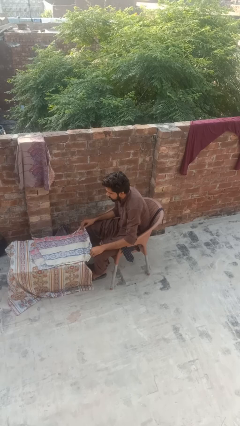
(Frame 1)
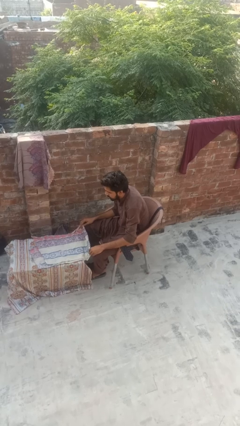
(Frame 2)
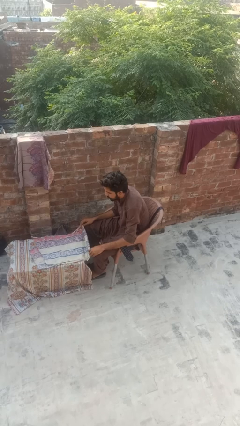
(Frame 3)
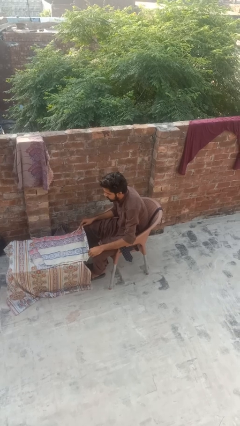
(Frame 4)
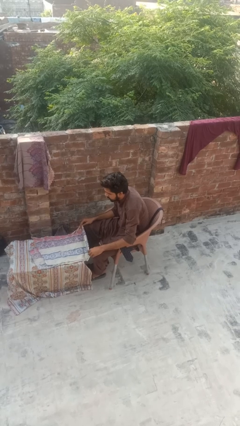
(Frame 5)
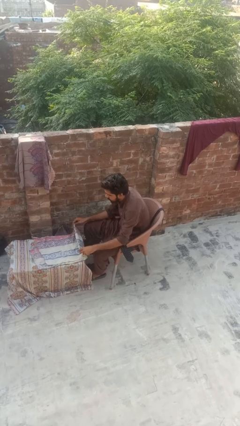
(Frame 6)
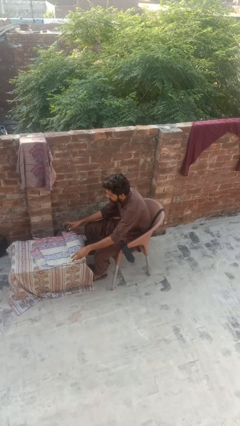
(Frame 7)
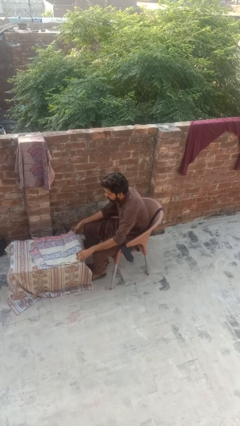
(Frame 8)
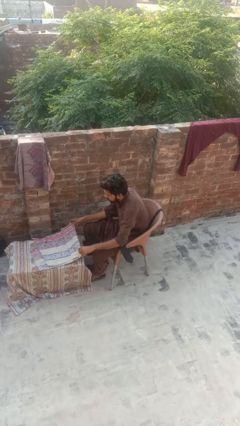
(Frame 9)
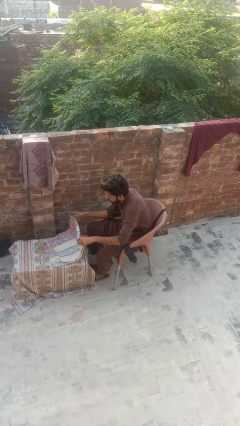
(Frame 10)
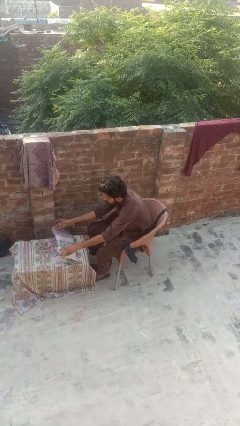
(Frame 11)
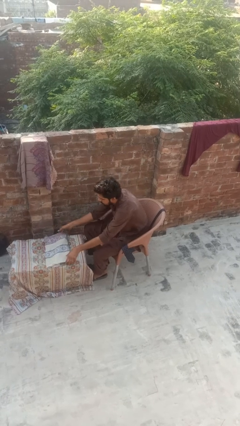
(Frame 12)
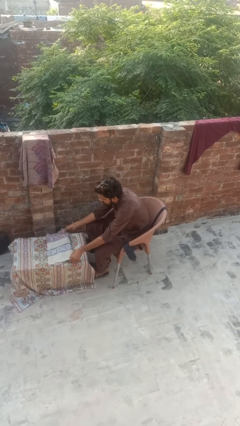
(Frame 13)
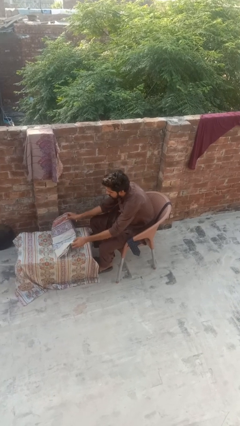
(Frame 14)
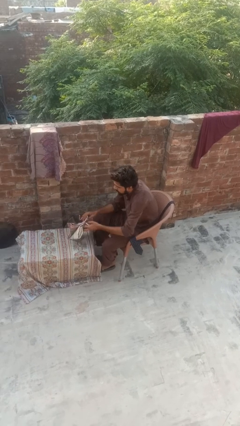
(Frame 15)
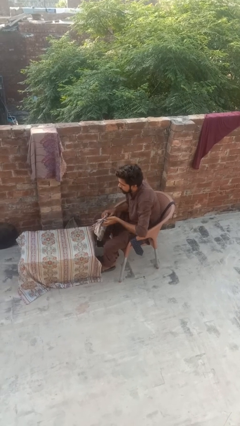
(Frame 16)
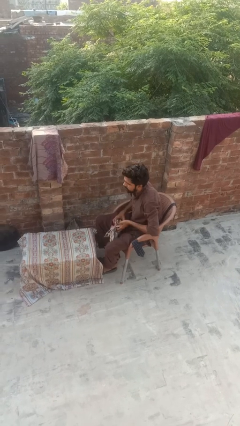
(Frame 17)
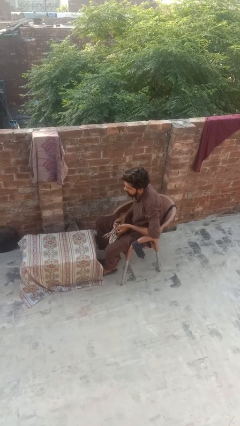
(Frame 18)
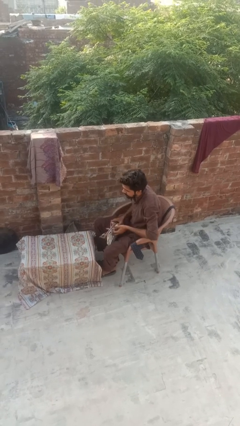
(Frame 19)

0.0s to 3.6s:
person folds tablecloth

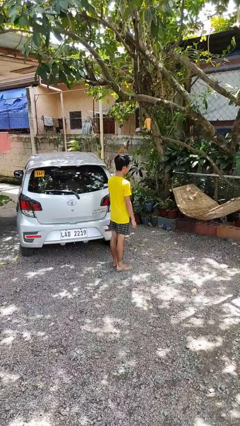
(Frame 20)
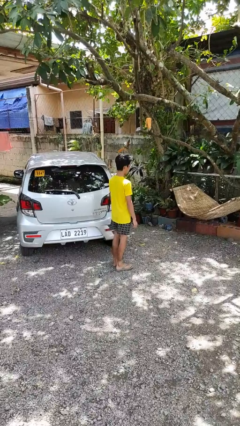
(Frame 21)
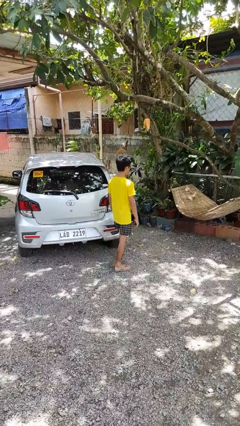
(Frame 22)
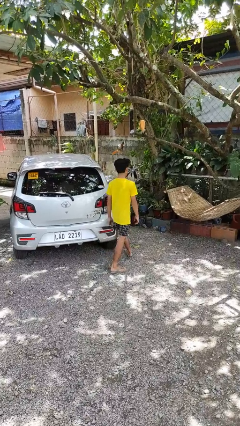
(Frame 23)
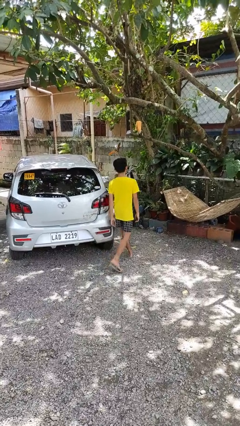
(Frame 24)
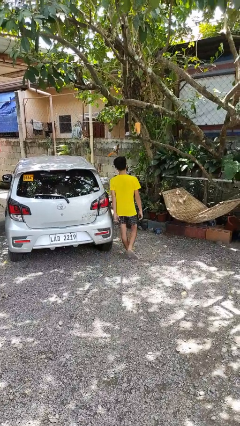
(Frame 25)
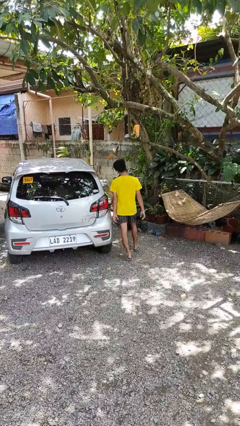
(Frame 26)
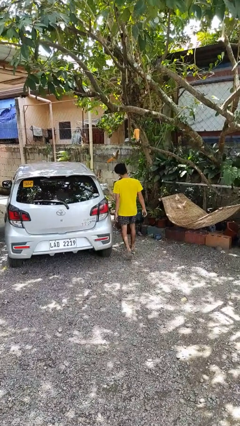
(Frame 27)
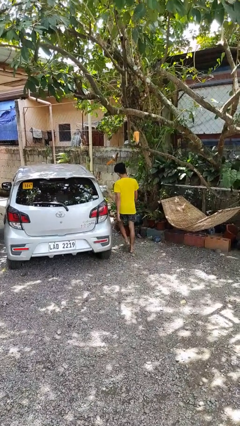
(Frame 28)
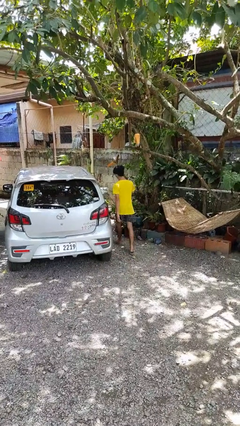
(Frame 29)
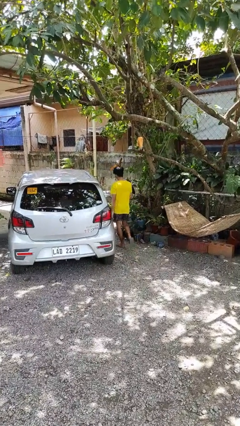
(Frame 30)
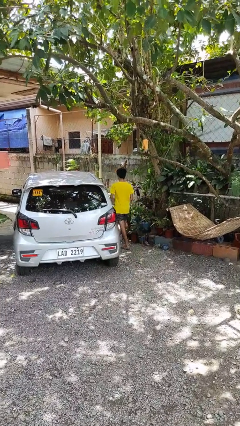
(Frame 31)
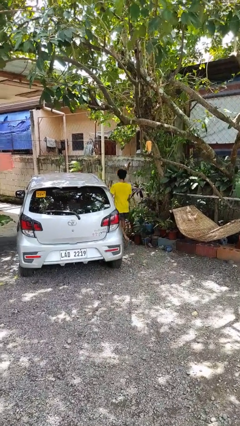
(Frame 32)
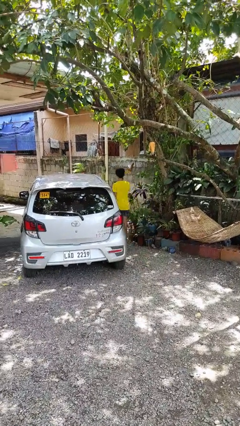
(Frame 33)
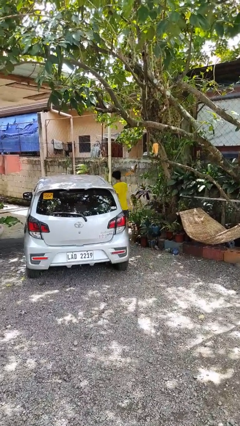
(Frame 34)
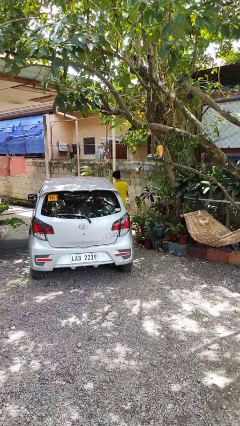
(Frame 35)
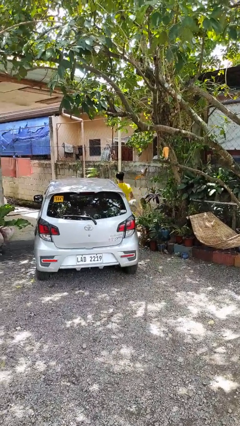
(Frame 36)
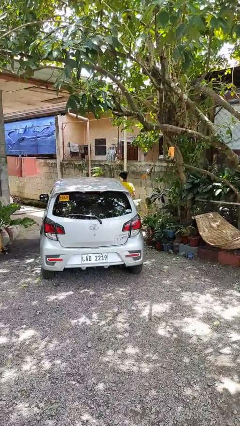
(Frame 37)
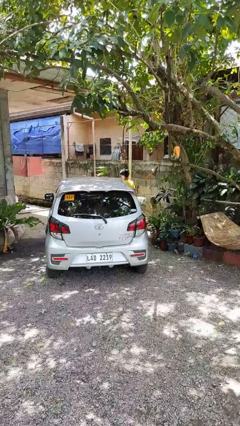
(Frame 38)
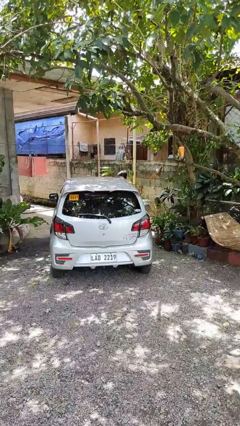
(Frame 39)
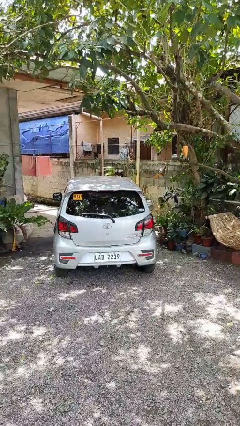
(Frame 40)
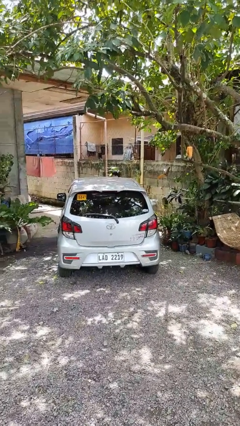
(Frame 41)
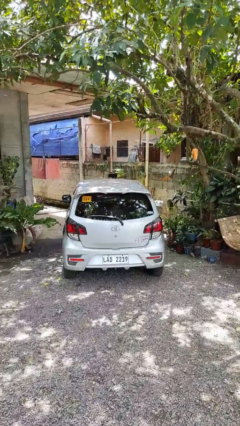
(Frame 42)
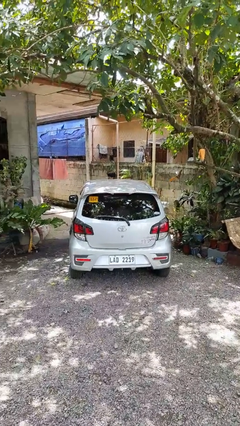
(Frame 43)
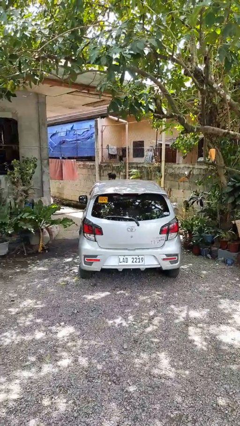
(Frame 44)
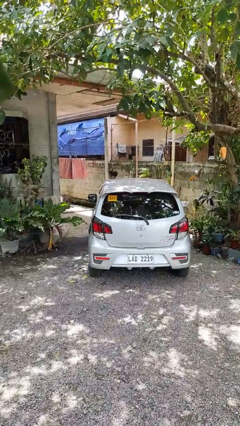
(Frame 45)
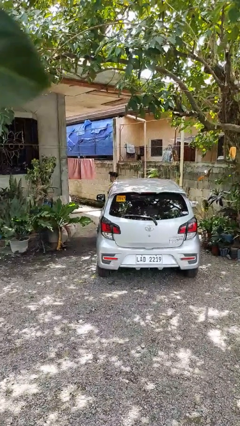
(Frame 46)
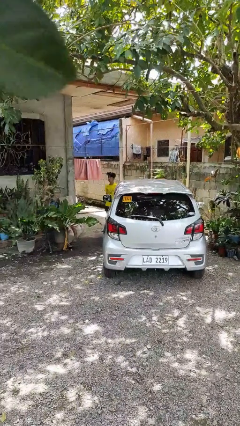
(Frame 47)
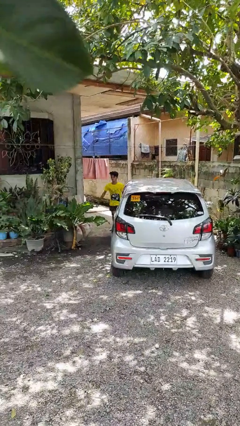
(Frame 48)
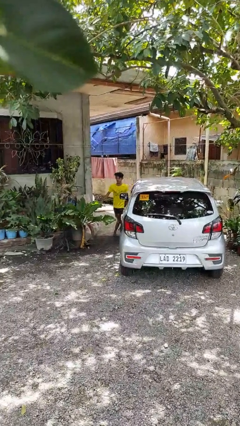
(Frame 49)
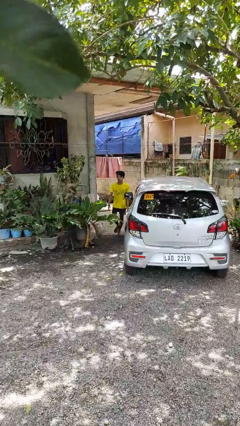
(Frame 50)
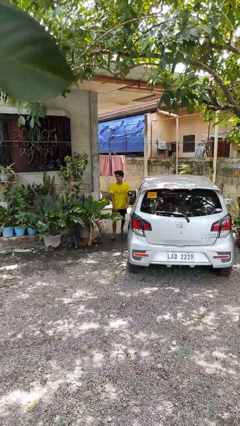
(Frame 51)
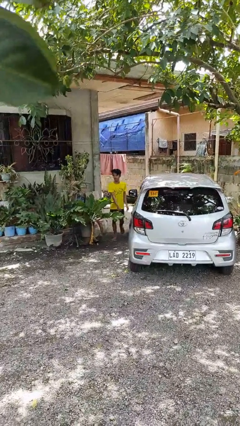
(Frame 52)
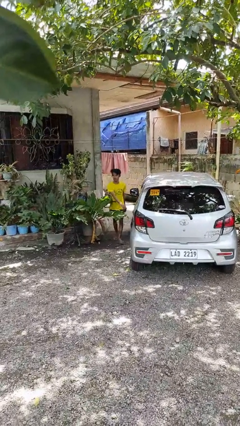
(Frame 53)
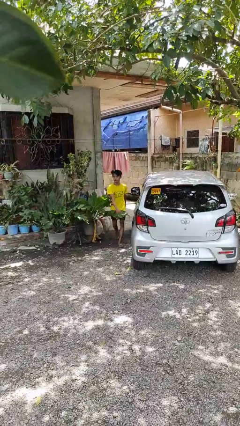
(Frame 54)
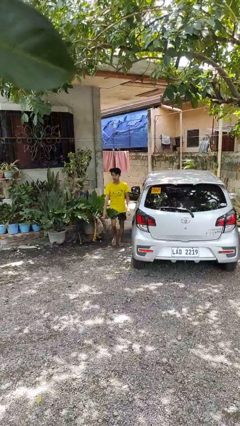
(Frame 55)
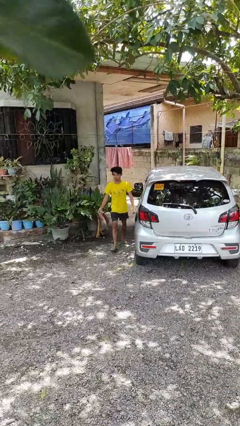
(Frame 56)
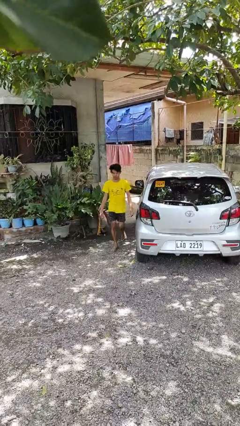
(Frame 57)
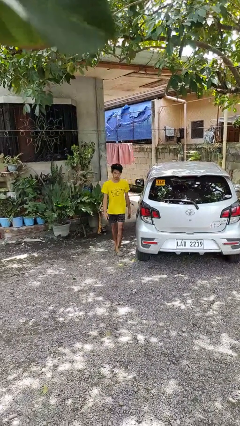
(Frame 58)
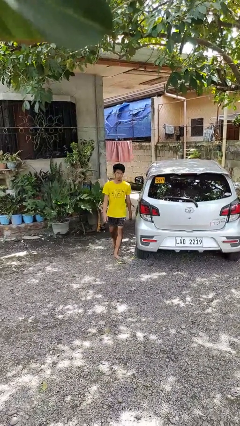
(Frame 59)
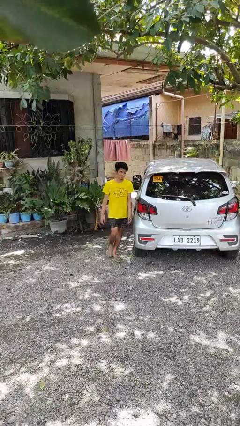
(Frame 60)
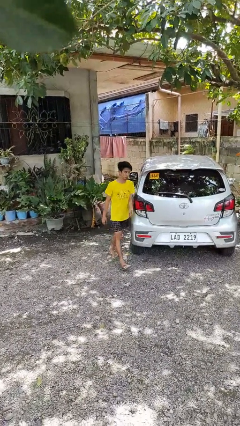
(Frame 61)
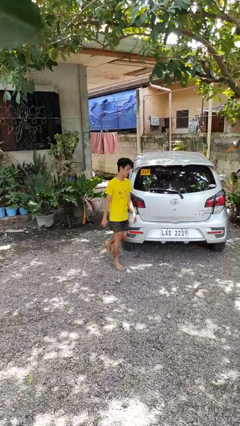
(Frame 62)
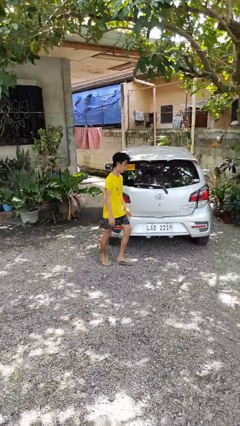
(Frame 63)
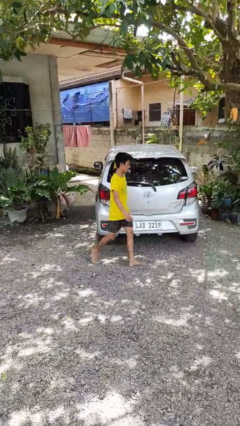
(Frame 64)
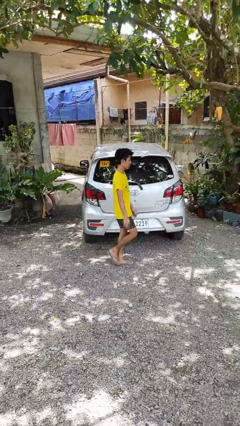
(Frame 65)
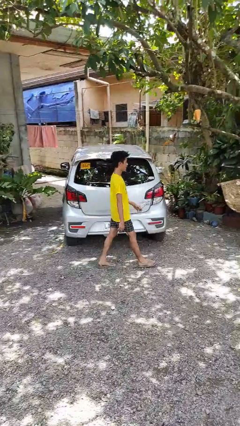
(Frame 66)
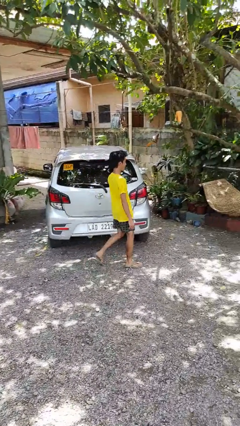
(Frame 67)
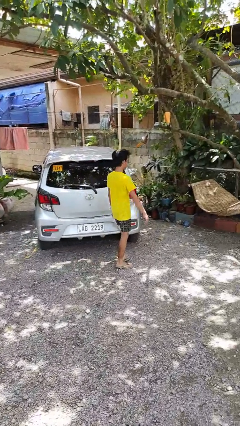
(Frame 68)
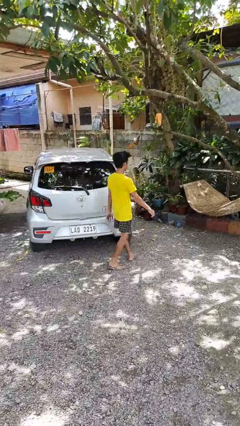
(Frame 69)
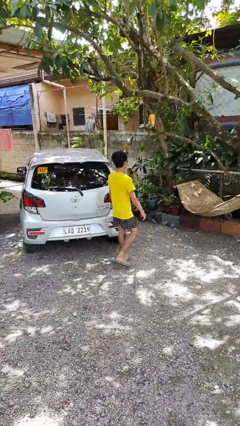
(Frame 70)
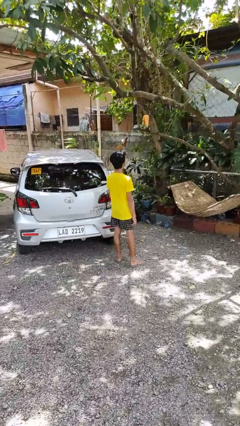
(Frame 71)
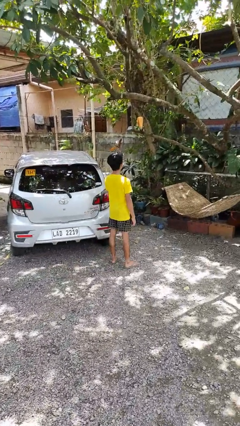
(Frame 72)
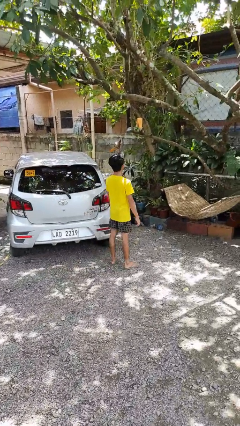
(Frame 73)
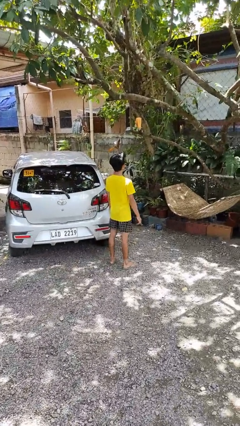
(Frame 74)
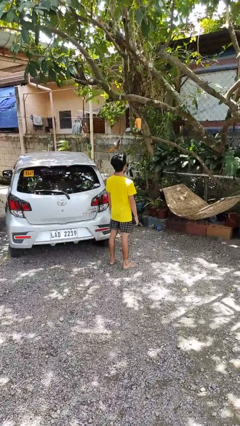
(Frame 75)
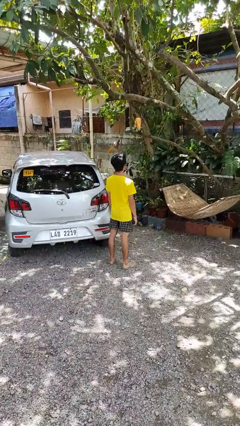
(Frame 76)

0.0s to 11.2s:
person walks around car

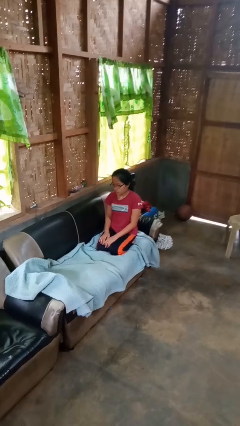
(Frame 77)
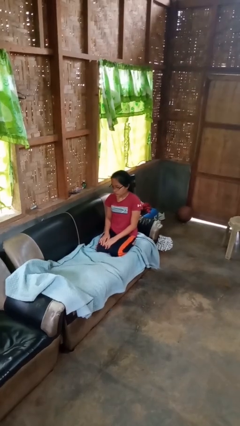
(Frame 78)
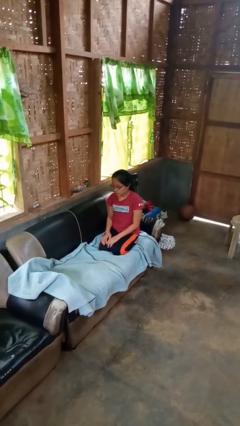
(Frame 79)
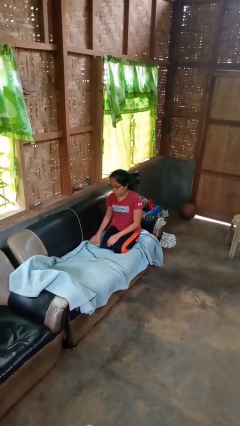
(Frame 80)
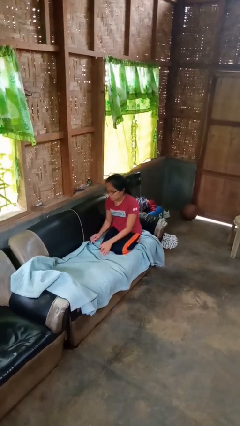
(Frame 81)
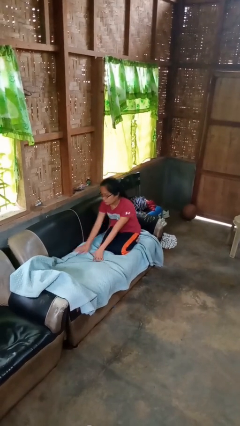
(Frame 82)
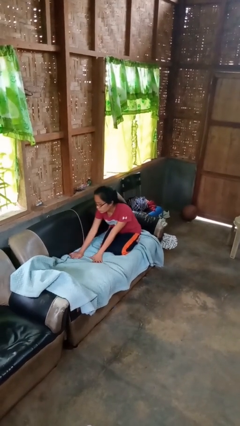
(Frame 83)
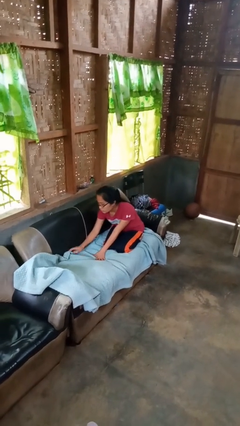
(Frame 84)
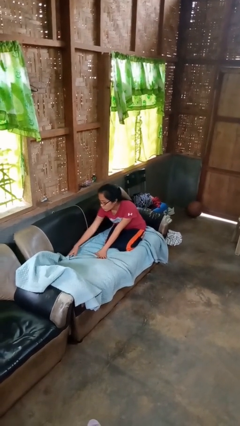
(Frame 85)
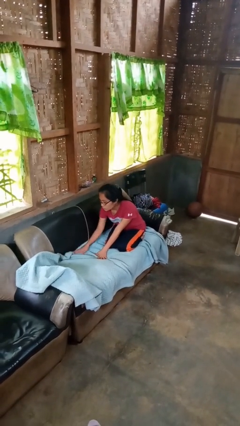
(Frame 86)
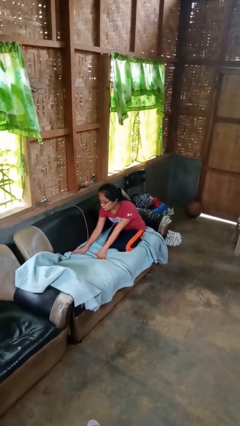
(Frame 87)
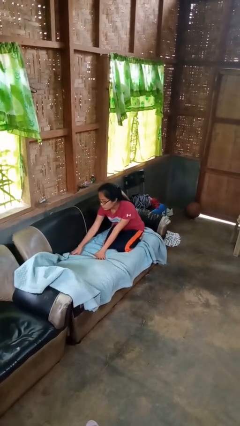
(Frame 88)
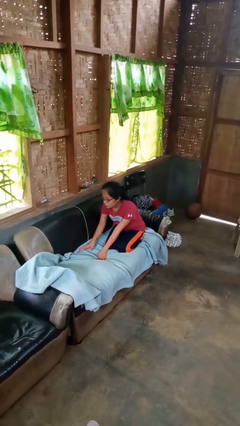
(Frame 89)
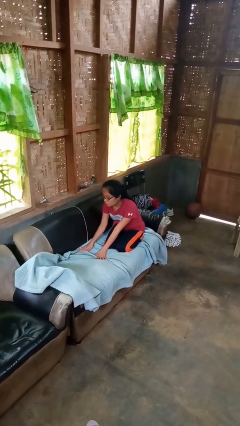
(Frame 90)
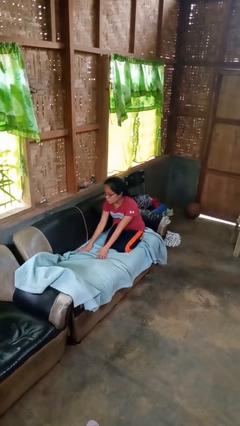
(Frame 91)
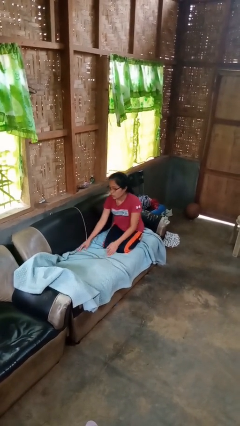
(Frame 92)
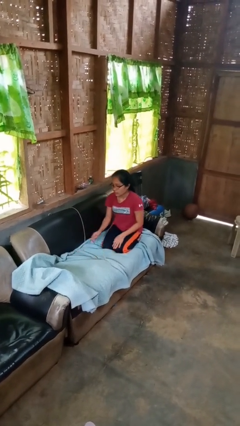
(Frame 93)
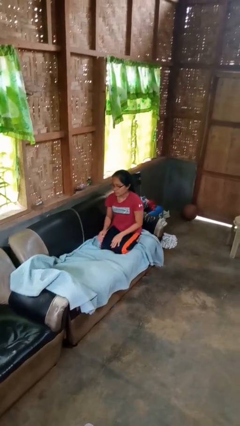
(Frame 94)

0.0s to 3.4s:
person searches in couch
